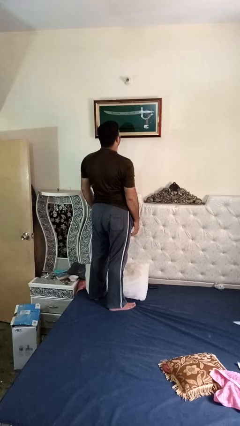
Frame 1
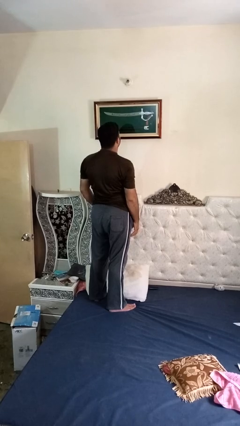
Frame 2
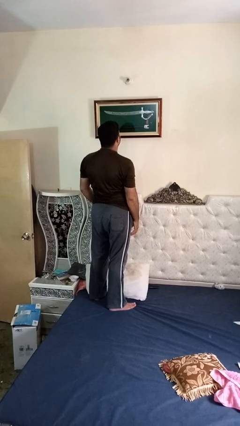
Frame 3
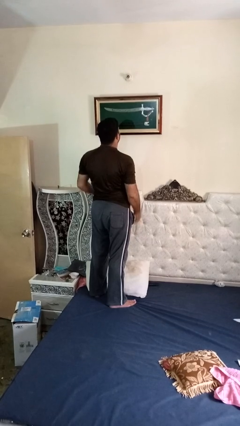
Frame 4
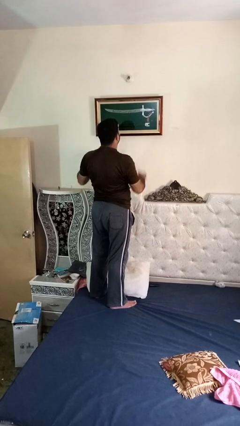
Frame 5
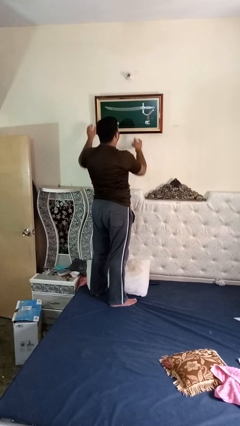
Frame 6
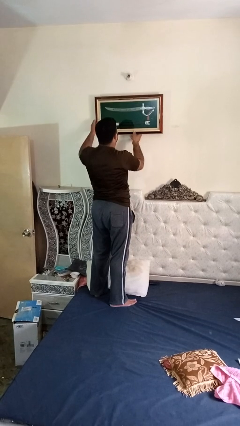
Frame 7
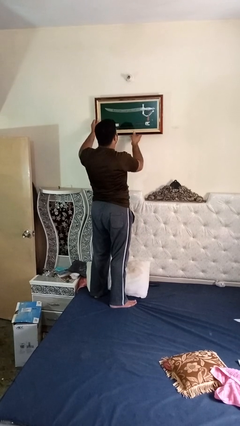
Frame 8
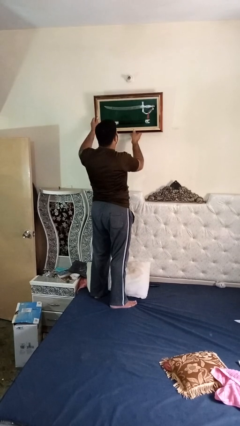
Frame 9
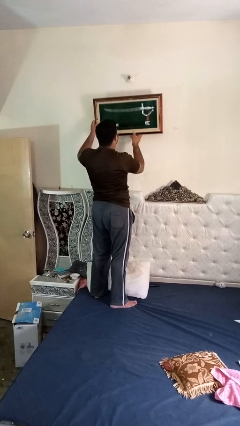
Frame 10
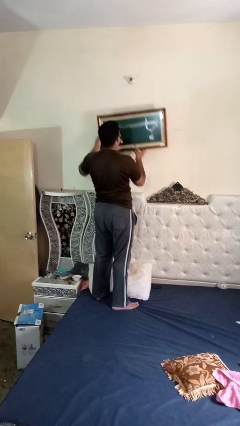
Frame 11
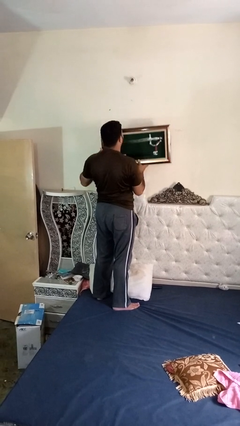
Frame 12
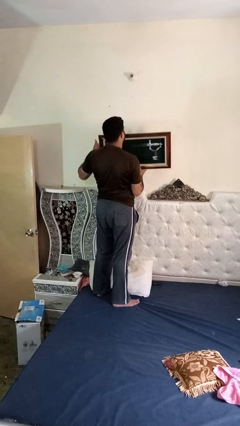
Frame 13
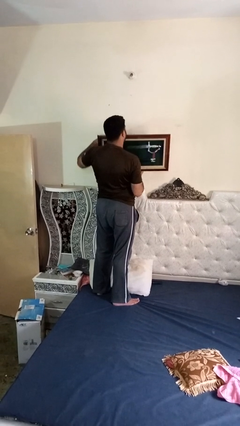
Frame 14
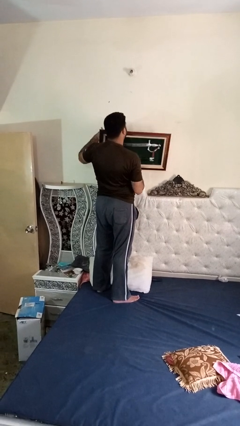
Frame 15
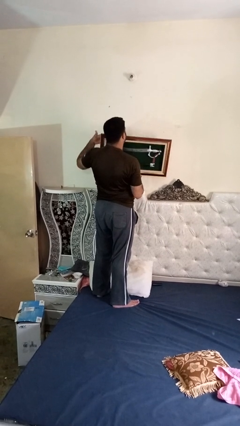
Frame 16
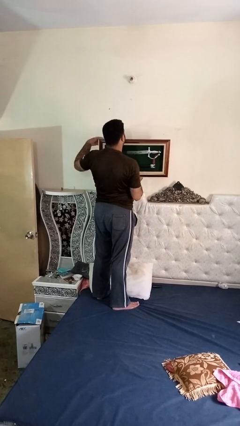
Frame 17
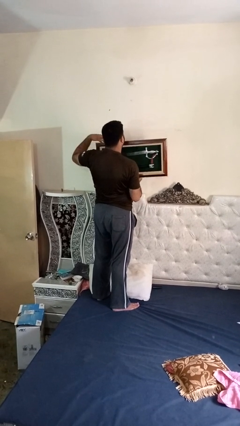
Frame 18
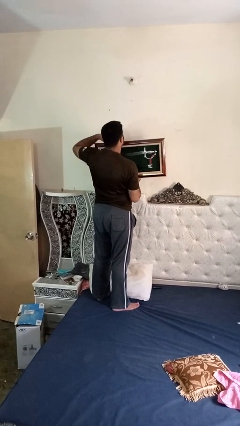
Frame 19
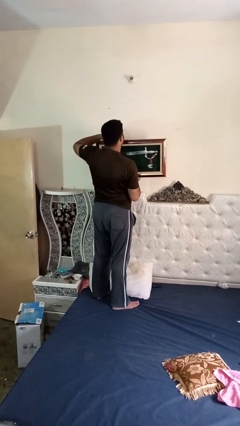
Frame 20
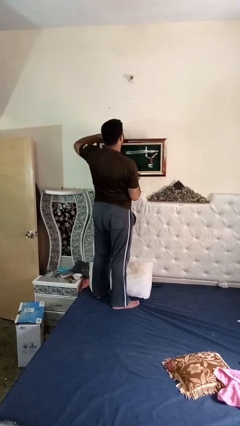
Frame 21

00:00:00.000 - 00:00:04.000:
person takes down picture frame

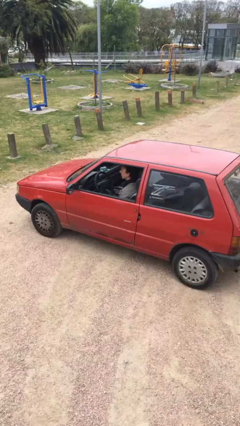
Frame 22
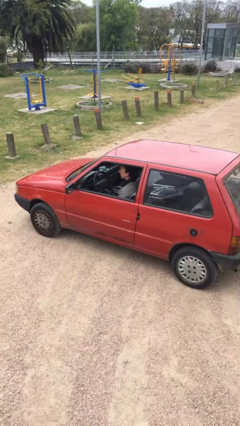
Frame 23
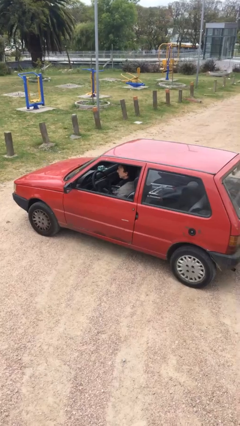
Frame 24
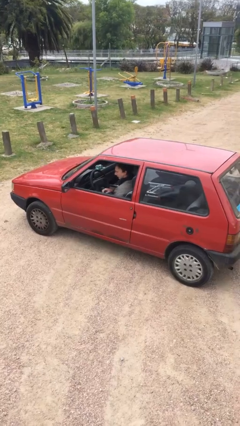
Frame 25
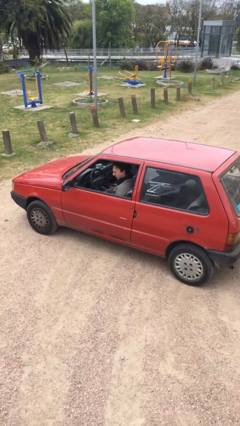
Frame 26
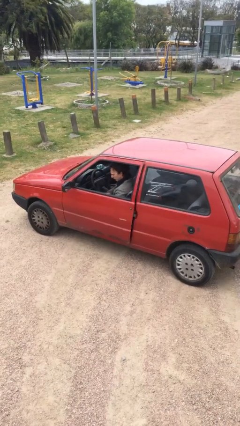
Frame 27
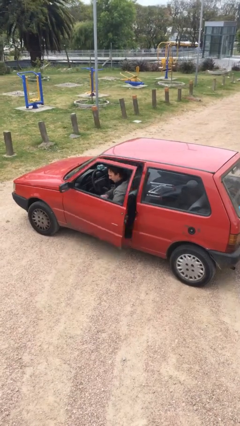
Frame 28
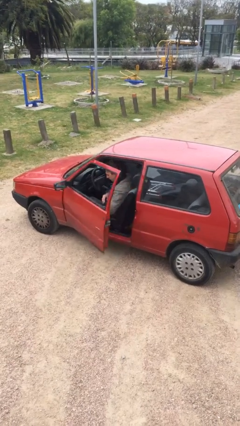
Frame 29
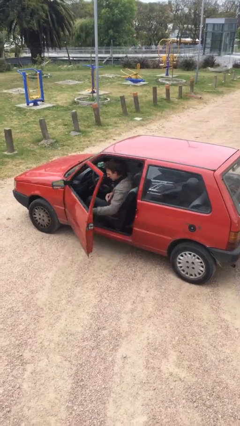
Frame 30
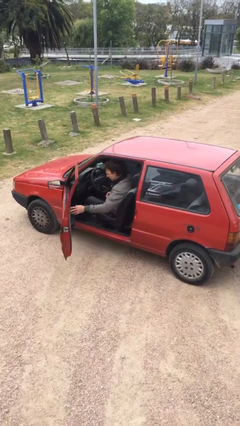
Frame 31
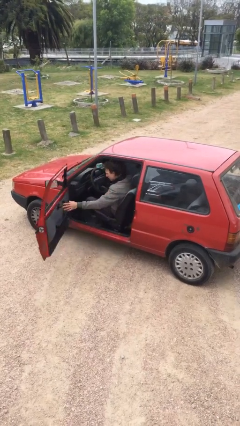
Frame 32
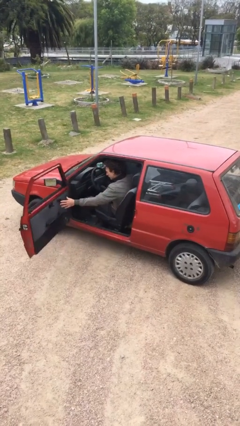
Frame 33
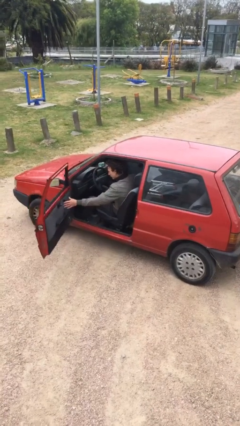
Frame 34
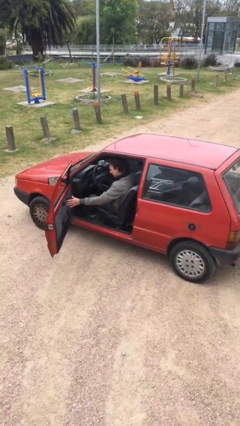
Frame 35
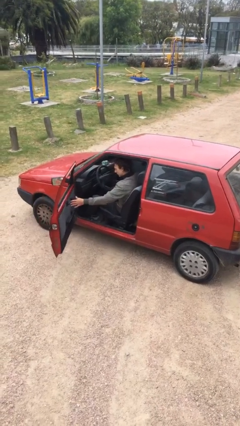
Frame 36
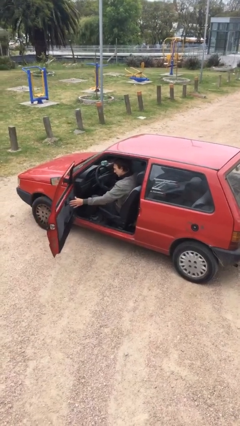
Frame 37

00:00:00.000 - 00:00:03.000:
person opens car door

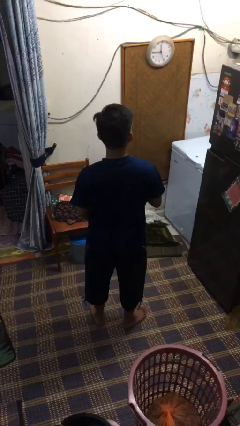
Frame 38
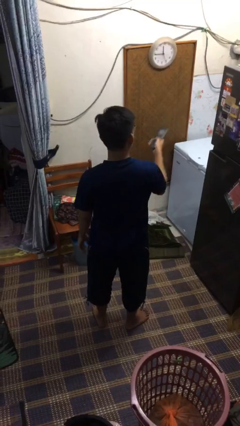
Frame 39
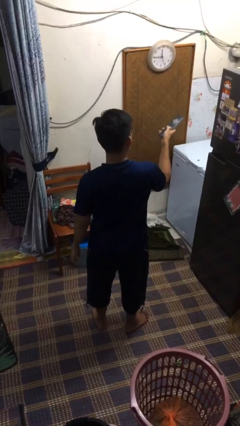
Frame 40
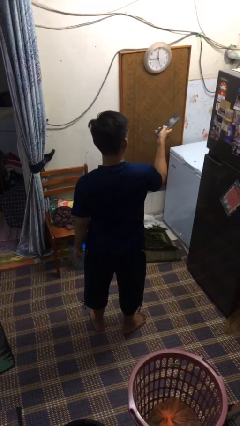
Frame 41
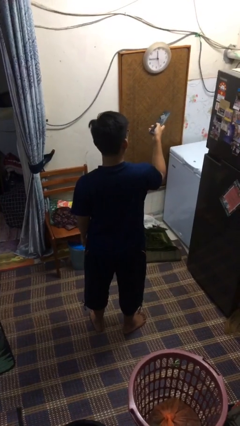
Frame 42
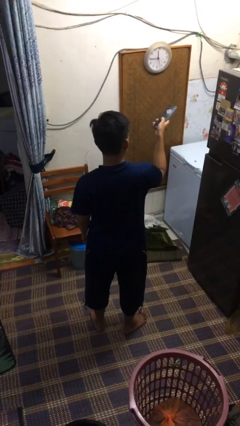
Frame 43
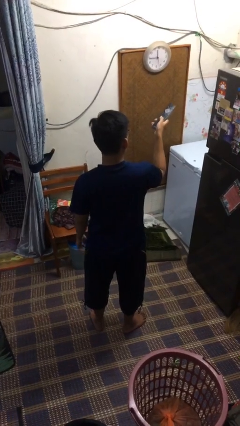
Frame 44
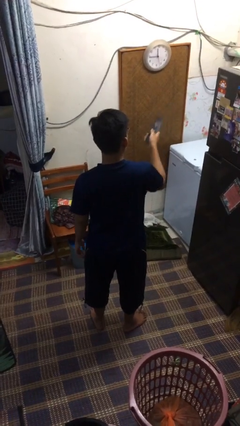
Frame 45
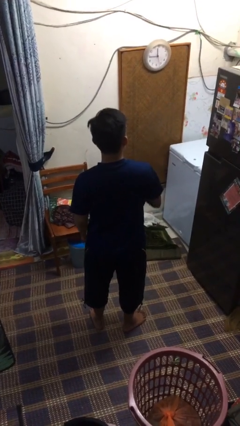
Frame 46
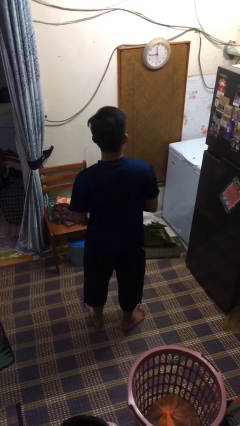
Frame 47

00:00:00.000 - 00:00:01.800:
person uses television remote

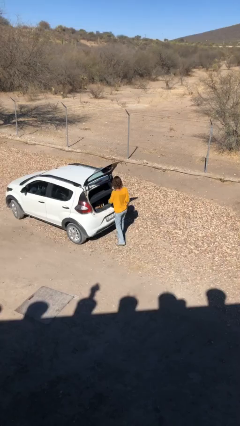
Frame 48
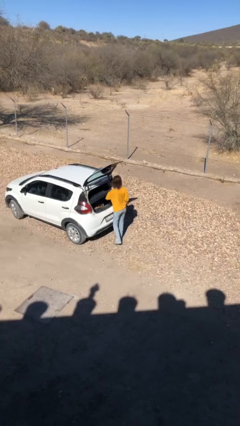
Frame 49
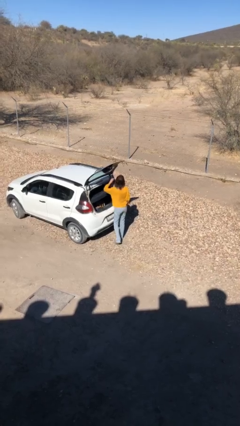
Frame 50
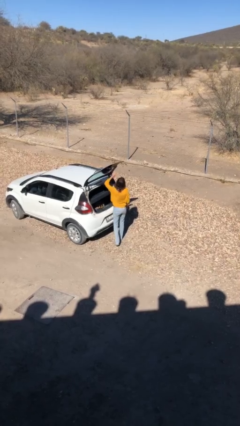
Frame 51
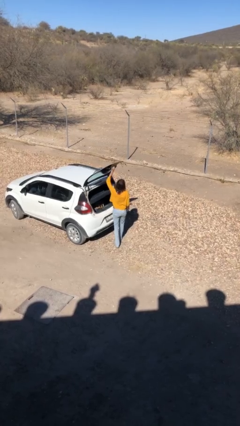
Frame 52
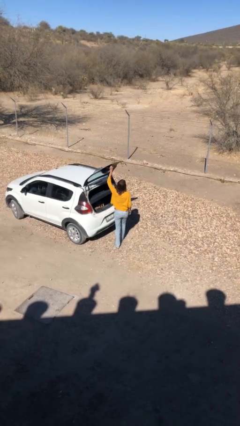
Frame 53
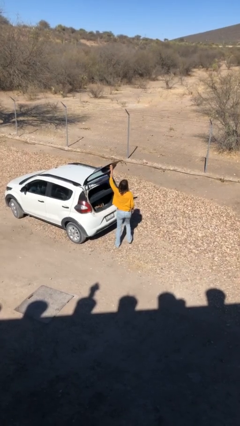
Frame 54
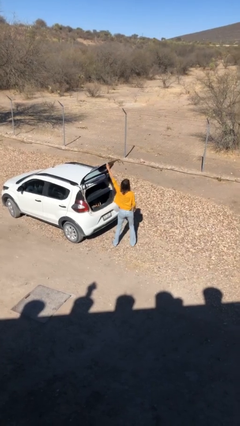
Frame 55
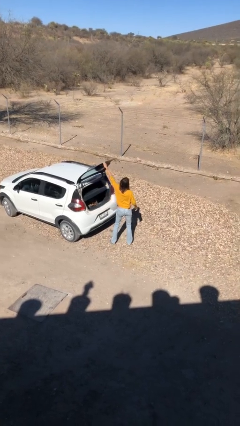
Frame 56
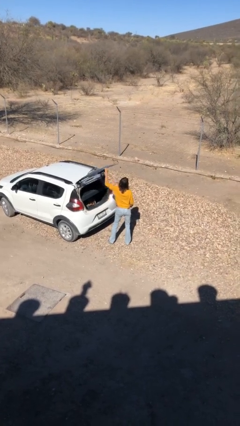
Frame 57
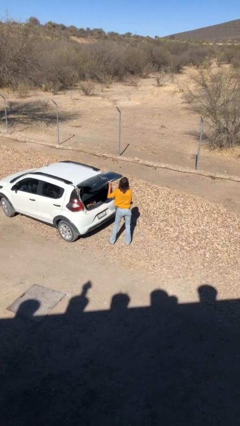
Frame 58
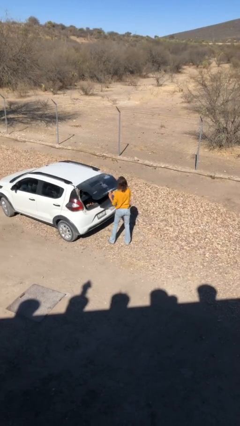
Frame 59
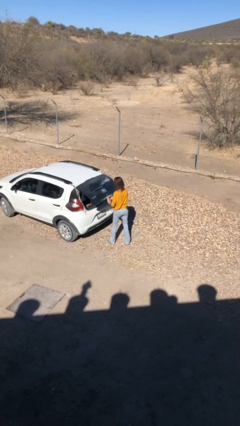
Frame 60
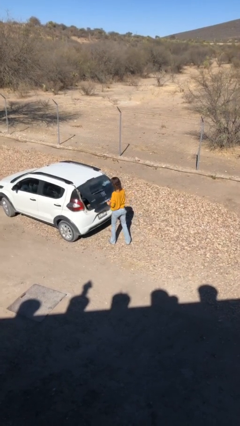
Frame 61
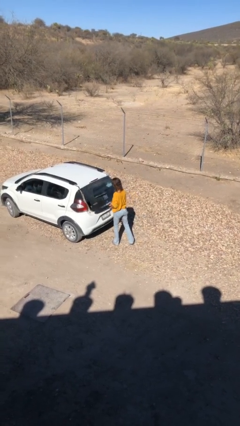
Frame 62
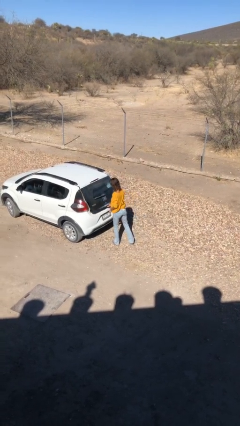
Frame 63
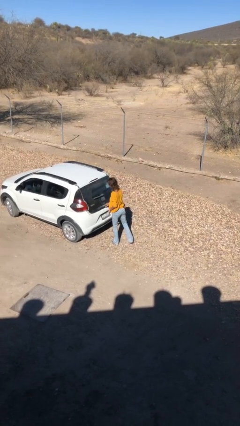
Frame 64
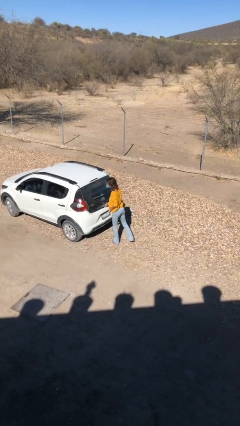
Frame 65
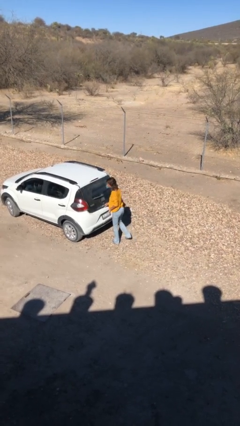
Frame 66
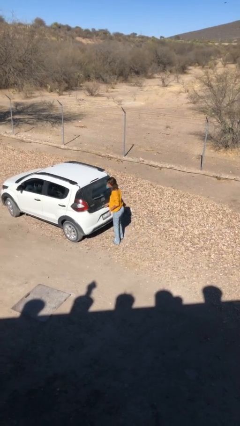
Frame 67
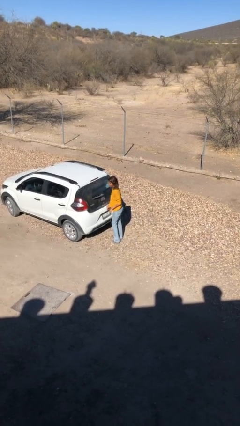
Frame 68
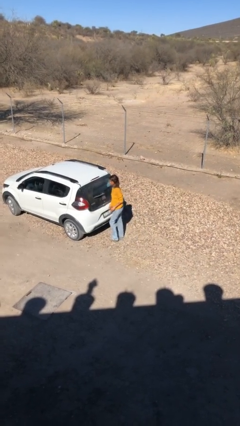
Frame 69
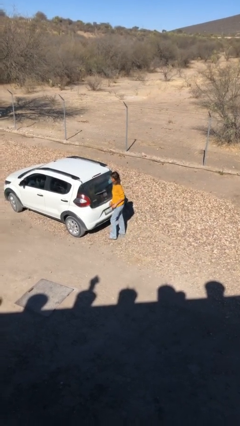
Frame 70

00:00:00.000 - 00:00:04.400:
person closes car trunk

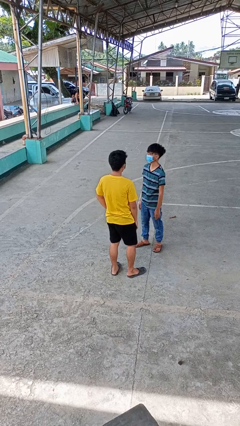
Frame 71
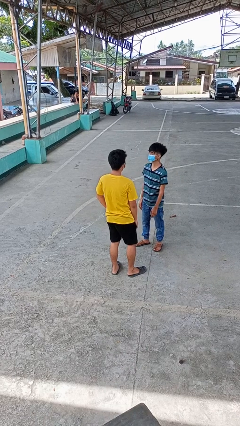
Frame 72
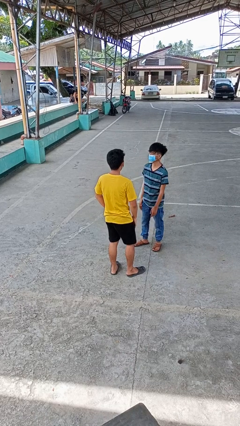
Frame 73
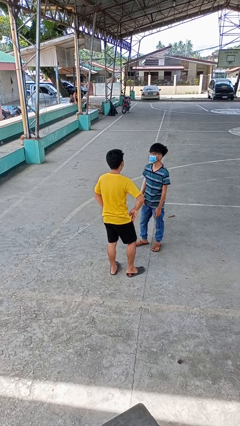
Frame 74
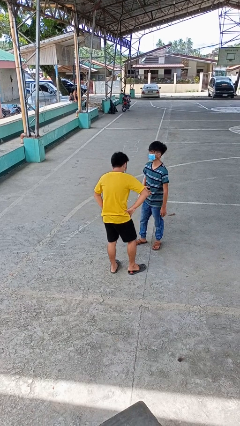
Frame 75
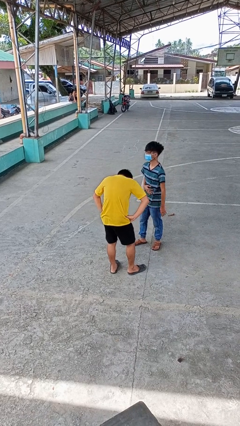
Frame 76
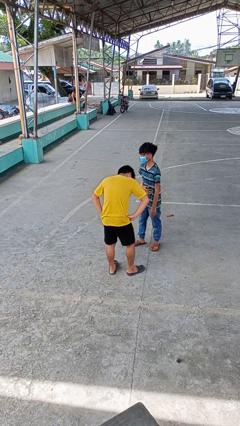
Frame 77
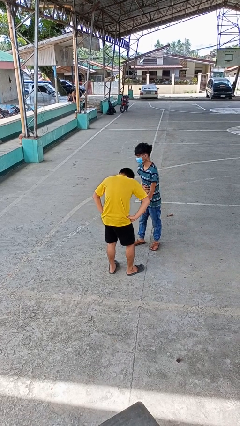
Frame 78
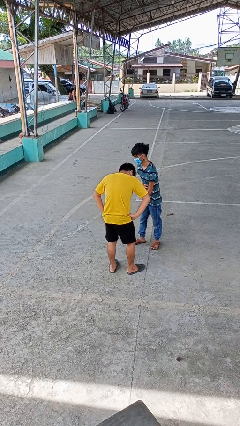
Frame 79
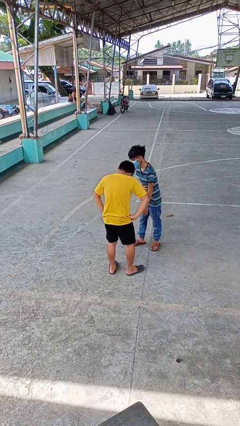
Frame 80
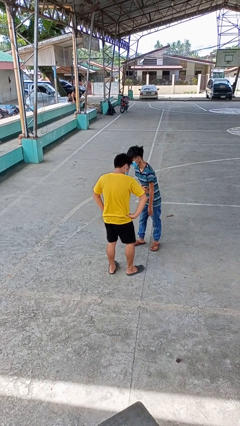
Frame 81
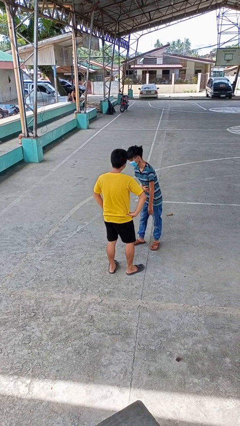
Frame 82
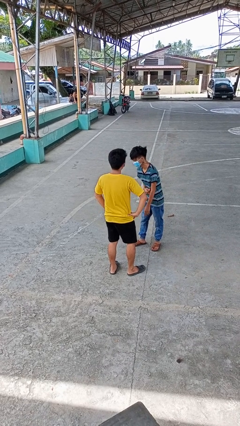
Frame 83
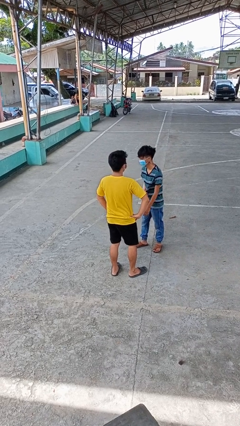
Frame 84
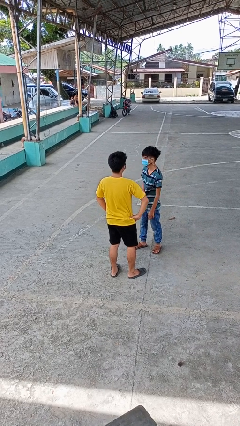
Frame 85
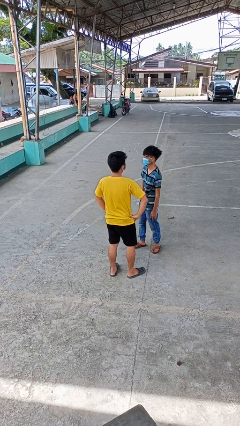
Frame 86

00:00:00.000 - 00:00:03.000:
person laughs with person

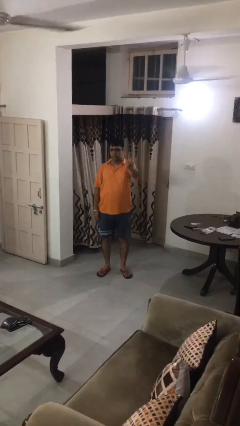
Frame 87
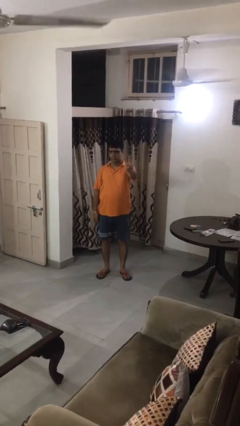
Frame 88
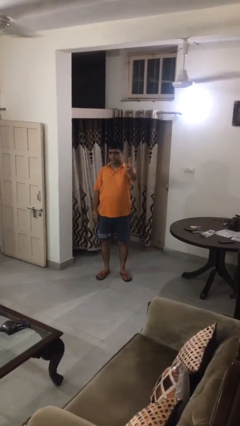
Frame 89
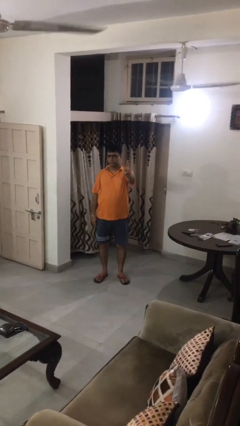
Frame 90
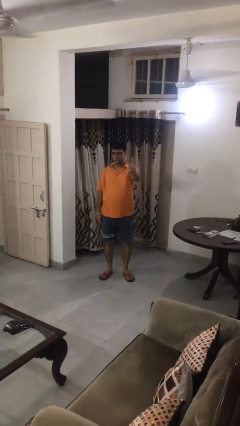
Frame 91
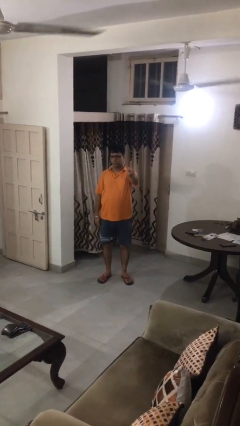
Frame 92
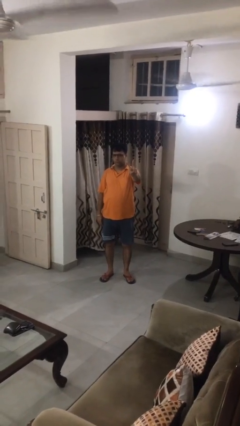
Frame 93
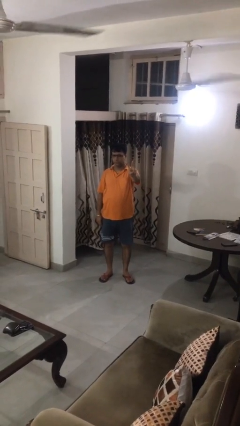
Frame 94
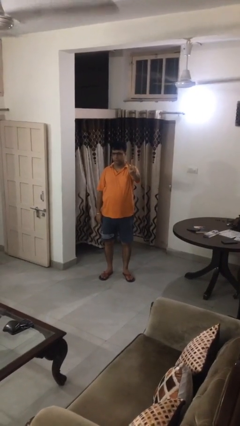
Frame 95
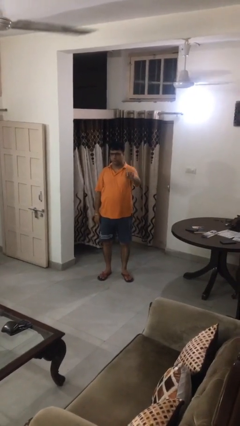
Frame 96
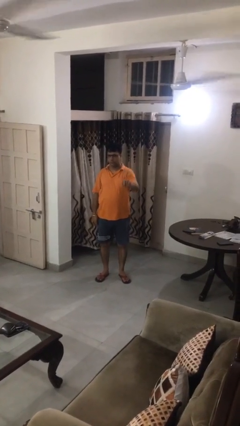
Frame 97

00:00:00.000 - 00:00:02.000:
person gestures peace
